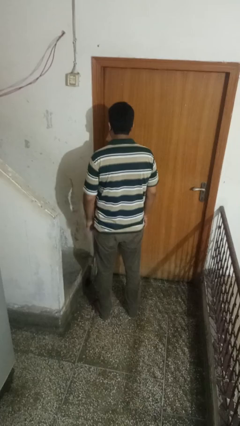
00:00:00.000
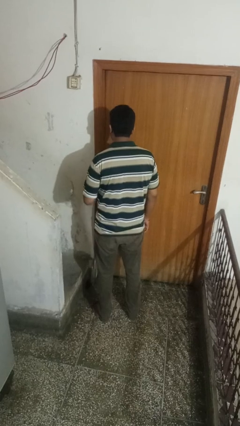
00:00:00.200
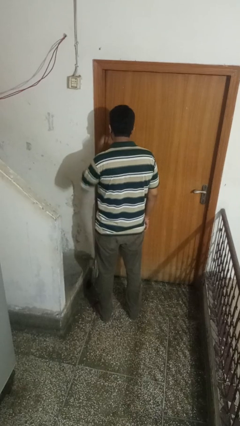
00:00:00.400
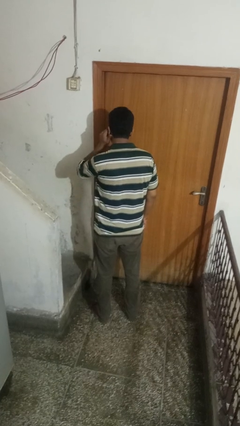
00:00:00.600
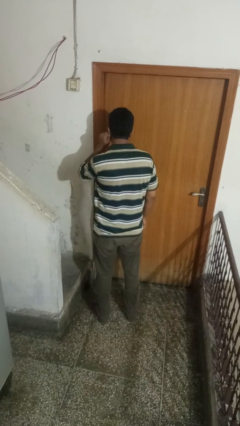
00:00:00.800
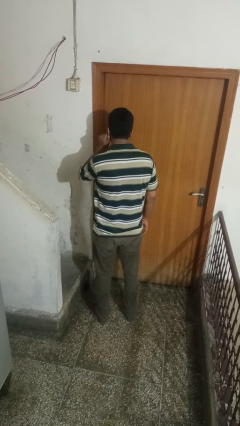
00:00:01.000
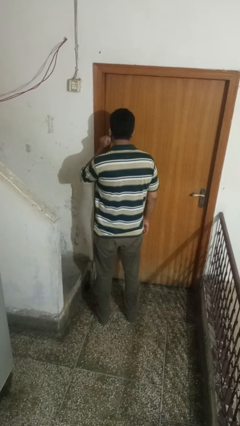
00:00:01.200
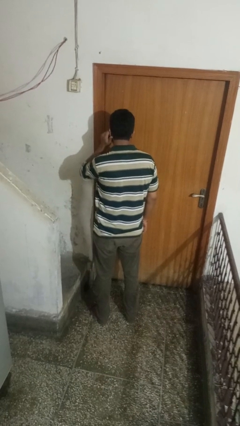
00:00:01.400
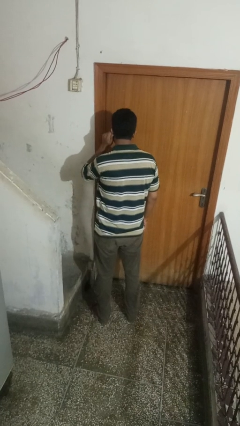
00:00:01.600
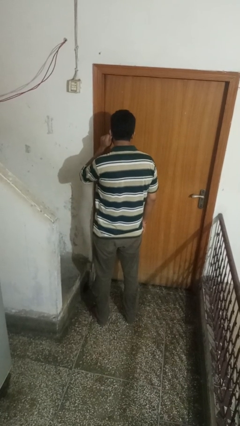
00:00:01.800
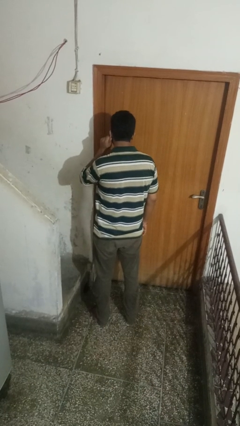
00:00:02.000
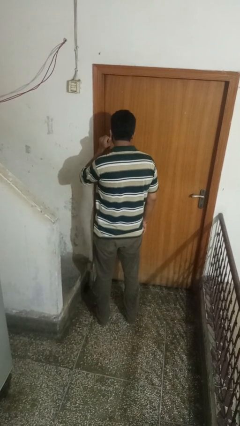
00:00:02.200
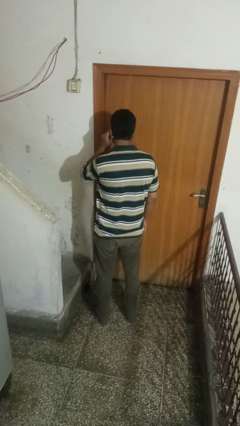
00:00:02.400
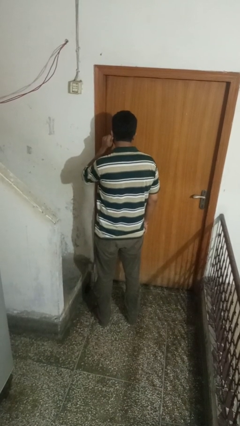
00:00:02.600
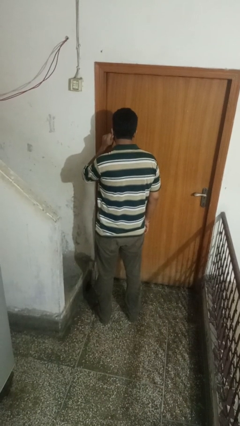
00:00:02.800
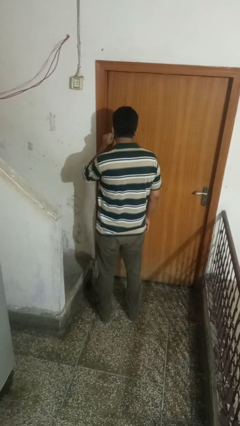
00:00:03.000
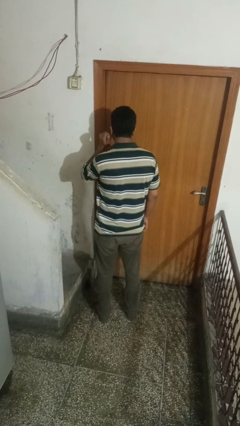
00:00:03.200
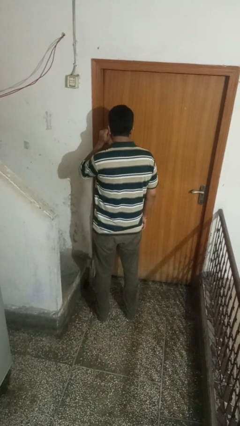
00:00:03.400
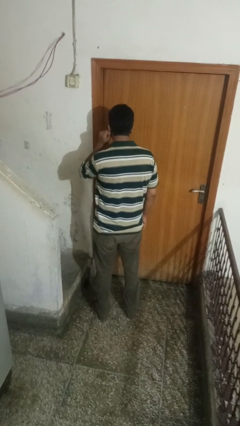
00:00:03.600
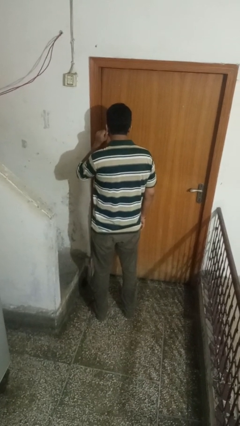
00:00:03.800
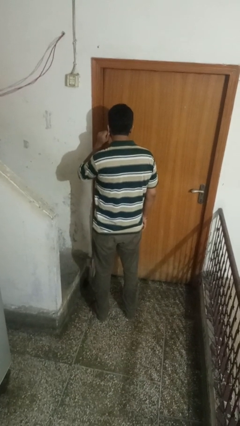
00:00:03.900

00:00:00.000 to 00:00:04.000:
person touches earlobe

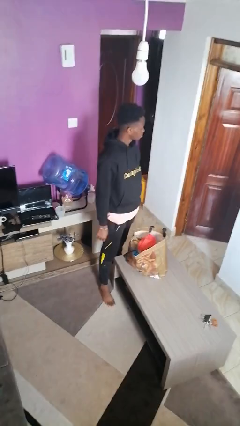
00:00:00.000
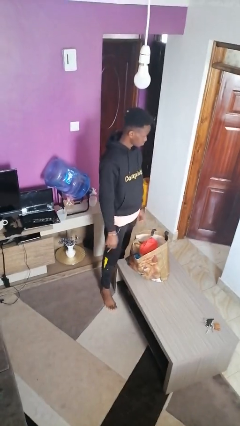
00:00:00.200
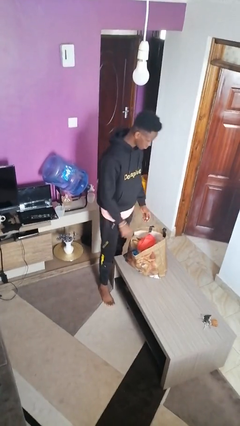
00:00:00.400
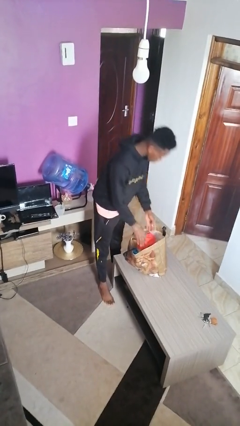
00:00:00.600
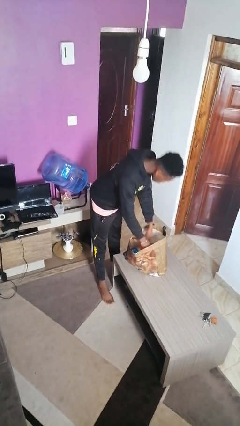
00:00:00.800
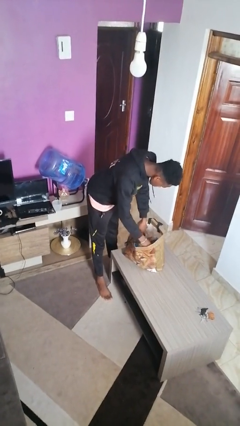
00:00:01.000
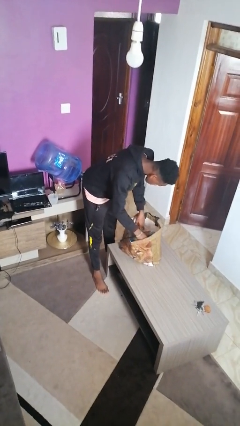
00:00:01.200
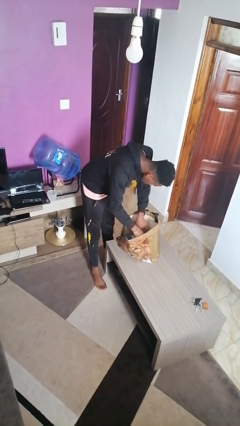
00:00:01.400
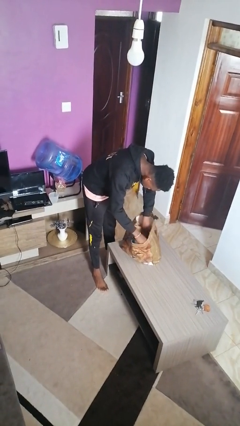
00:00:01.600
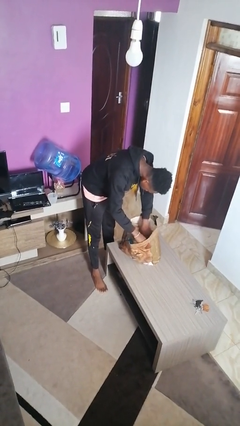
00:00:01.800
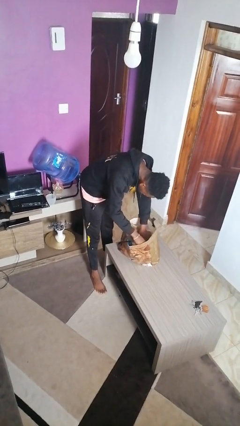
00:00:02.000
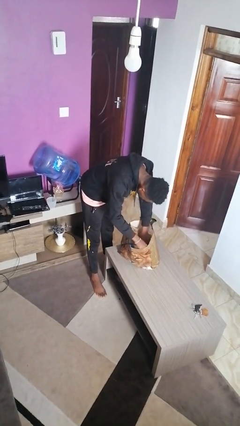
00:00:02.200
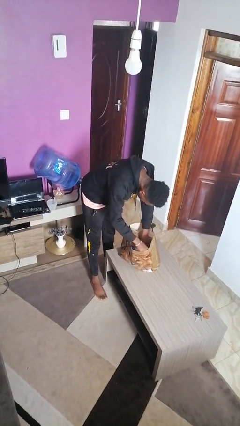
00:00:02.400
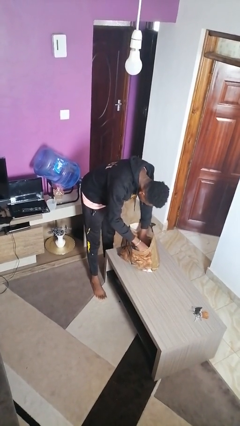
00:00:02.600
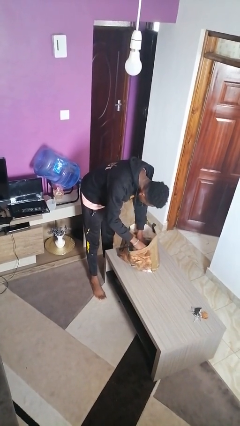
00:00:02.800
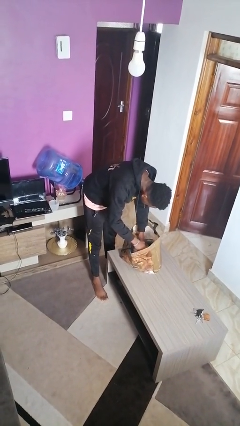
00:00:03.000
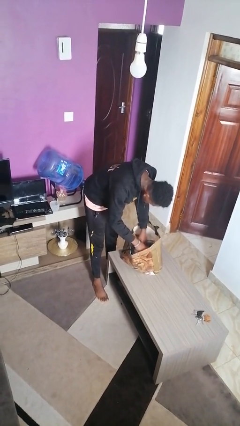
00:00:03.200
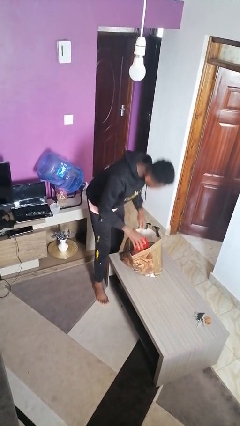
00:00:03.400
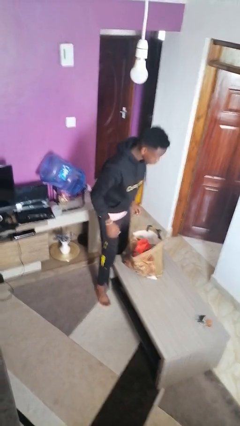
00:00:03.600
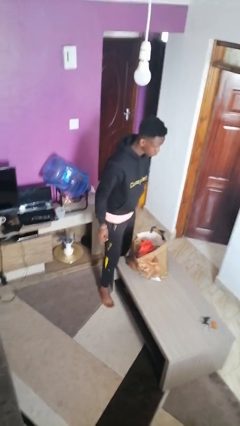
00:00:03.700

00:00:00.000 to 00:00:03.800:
person searches in bag

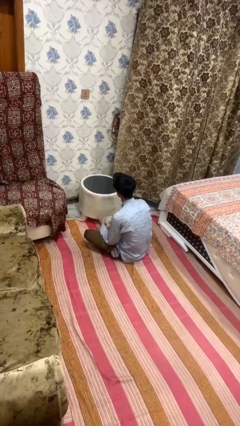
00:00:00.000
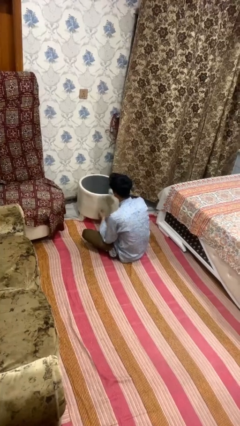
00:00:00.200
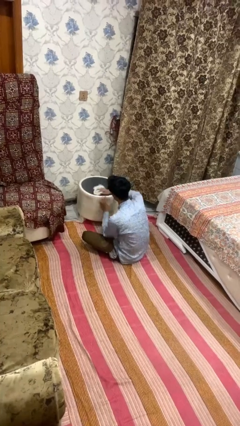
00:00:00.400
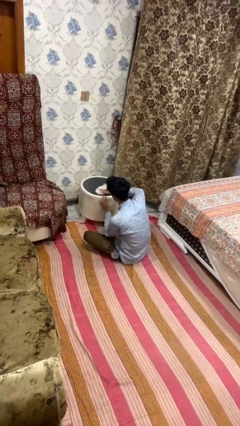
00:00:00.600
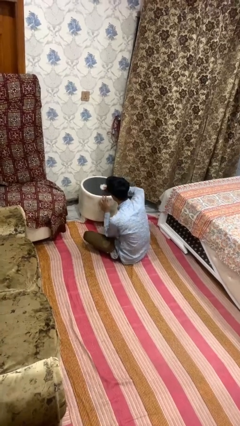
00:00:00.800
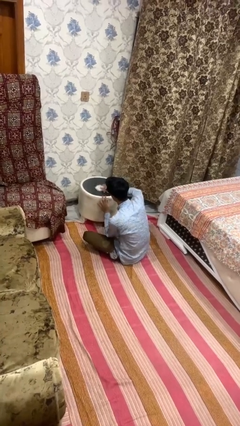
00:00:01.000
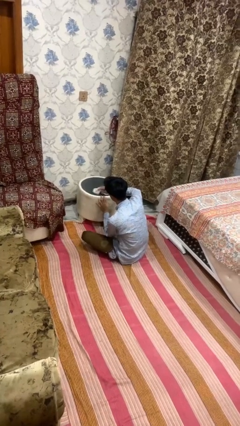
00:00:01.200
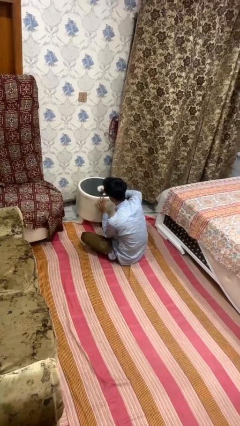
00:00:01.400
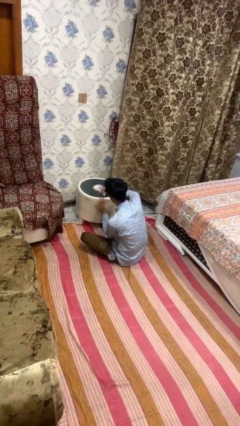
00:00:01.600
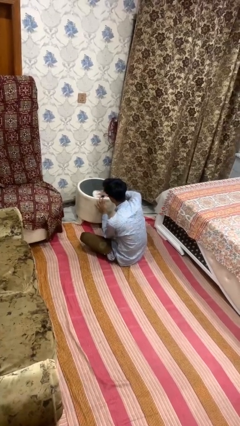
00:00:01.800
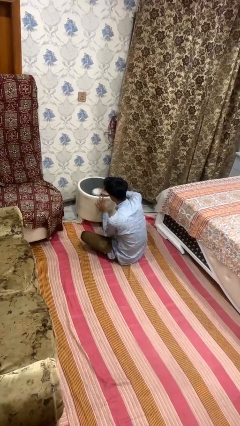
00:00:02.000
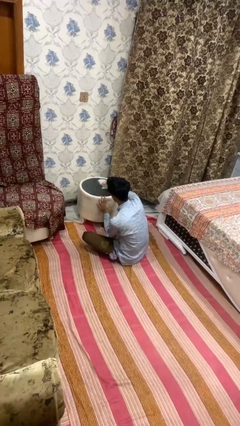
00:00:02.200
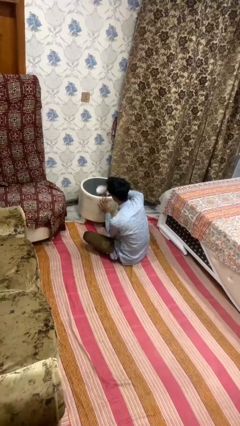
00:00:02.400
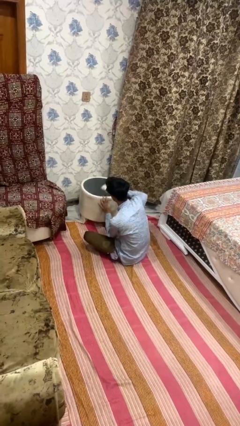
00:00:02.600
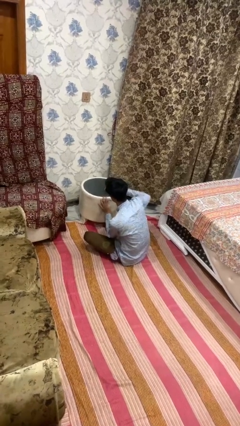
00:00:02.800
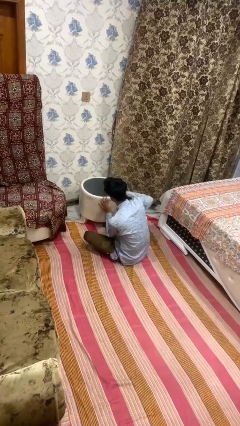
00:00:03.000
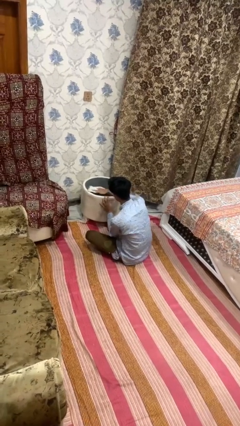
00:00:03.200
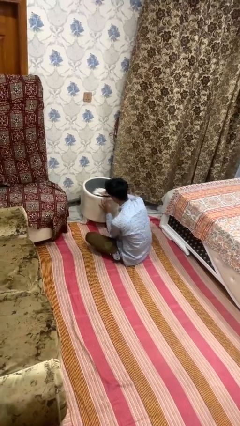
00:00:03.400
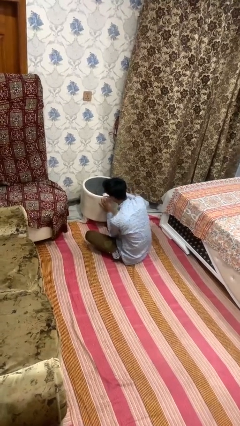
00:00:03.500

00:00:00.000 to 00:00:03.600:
person cleans table with rag

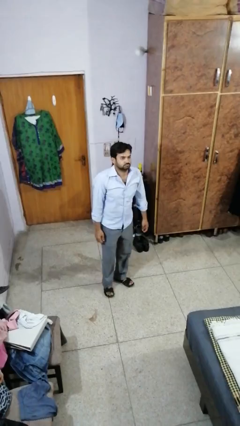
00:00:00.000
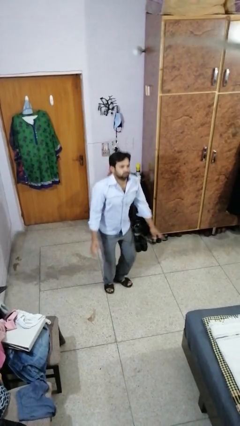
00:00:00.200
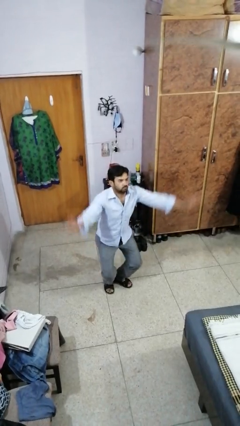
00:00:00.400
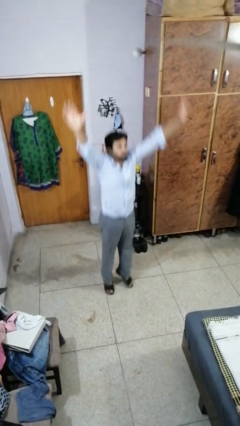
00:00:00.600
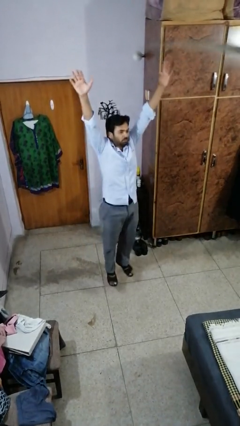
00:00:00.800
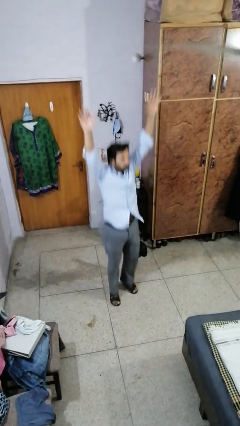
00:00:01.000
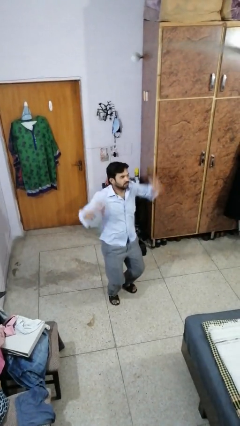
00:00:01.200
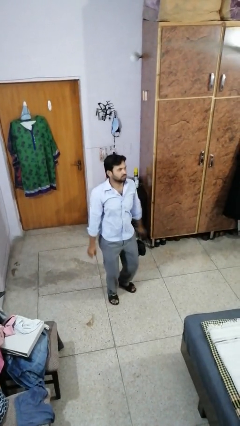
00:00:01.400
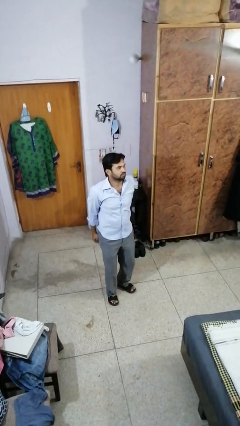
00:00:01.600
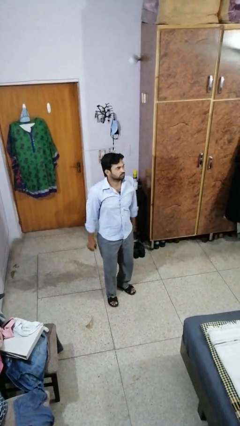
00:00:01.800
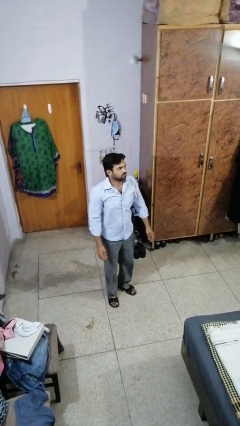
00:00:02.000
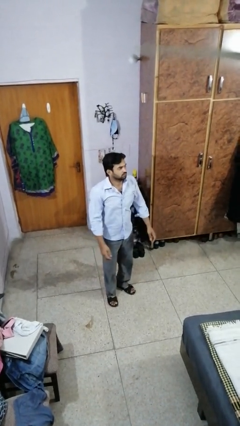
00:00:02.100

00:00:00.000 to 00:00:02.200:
person jumps

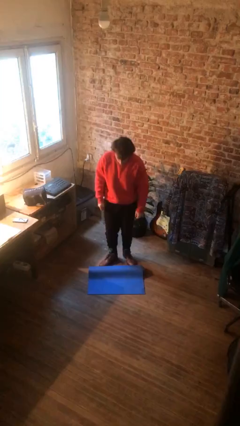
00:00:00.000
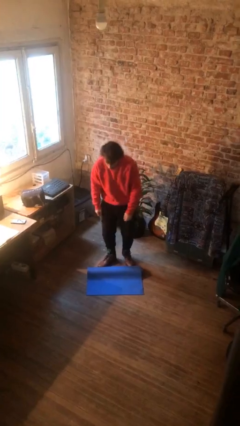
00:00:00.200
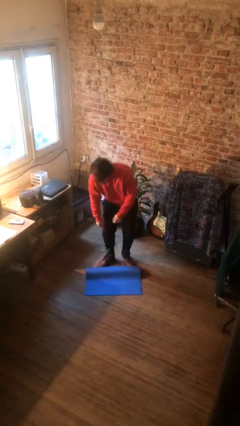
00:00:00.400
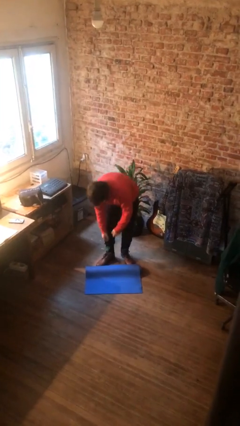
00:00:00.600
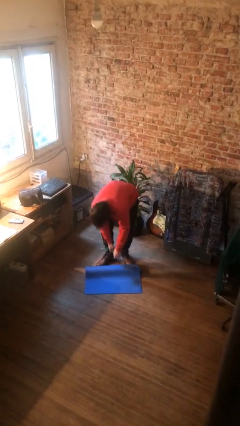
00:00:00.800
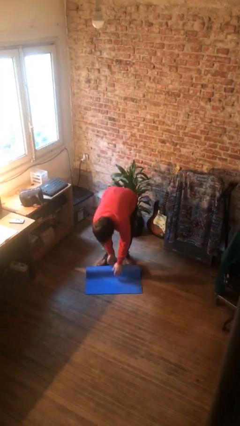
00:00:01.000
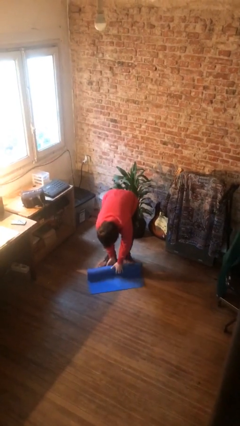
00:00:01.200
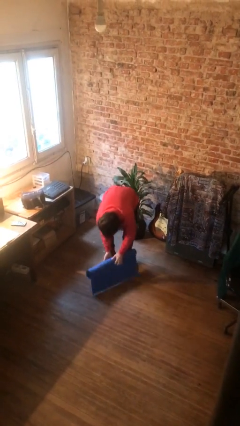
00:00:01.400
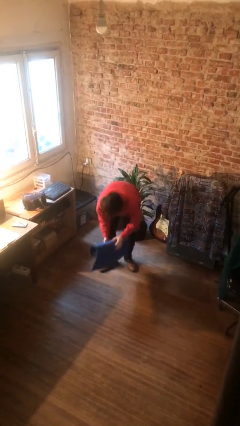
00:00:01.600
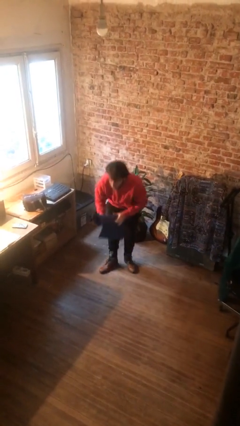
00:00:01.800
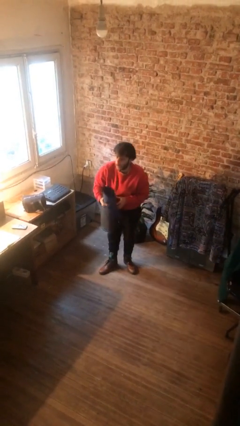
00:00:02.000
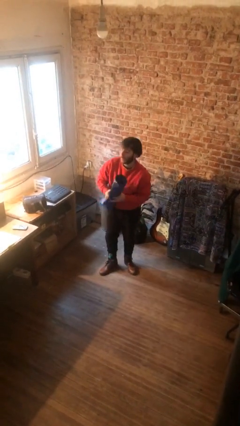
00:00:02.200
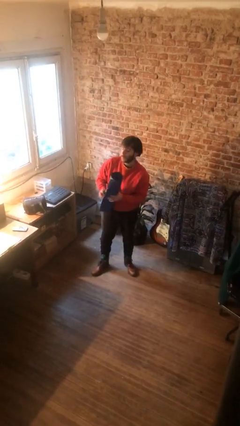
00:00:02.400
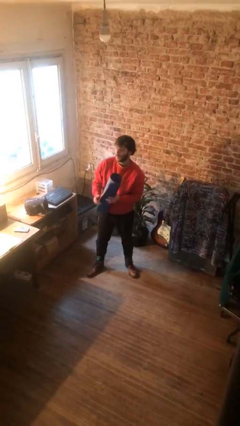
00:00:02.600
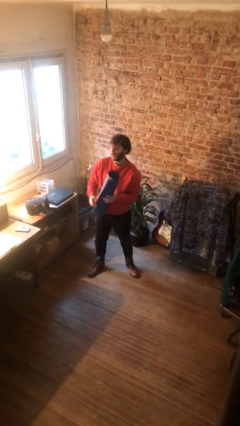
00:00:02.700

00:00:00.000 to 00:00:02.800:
person picks up object from floor

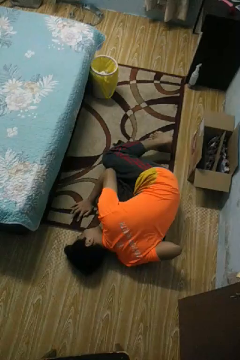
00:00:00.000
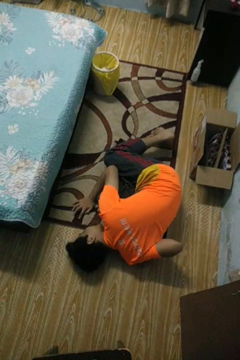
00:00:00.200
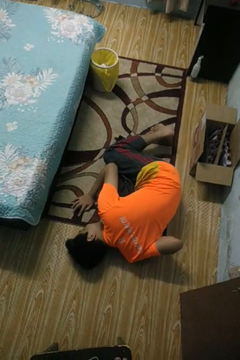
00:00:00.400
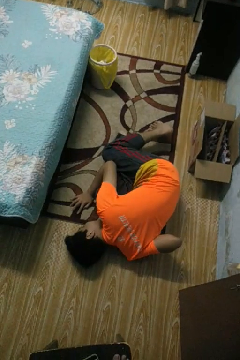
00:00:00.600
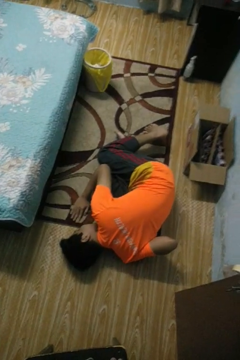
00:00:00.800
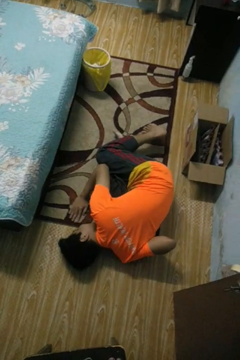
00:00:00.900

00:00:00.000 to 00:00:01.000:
person lies down on floor
